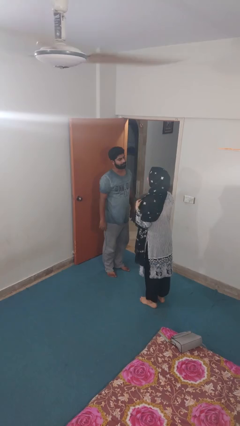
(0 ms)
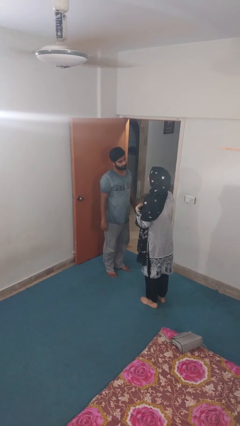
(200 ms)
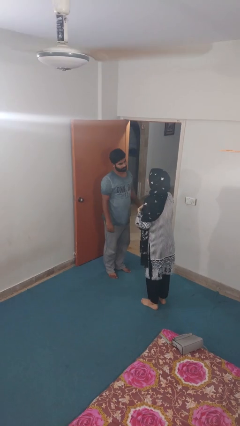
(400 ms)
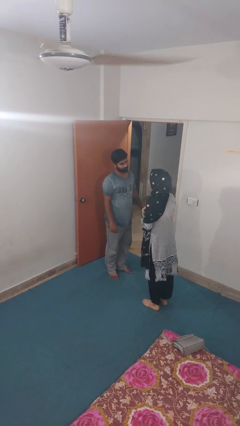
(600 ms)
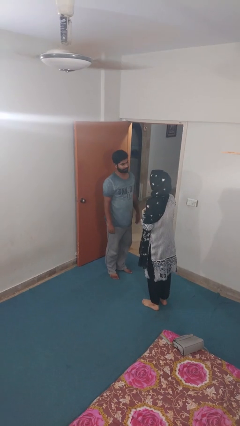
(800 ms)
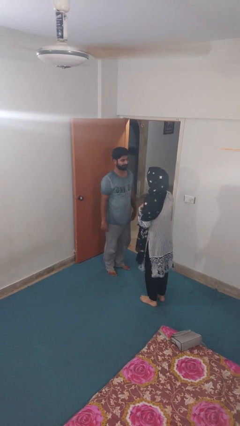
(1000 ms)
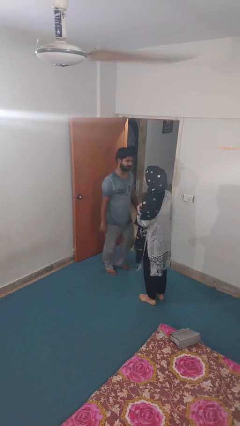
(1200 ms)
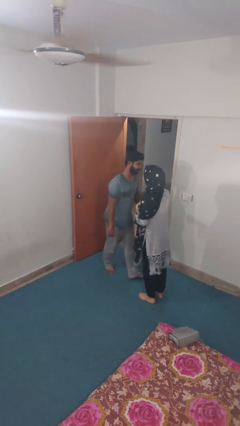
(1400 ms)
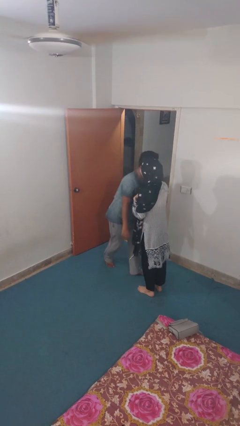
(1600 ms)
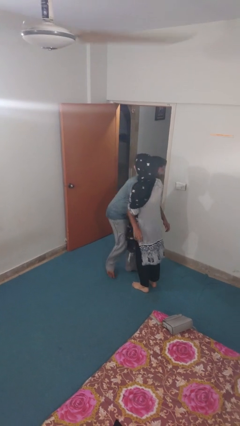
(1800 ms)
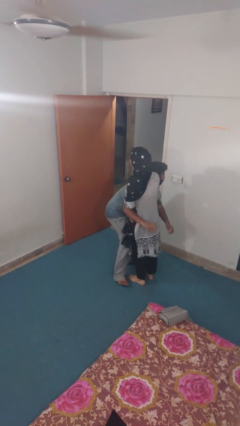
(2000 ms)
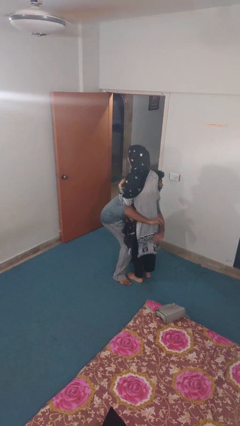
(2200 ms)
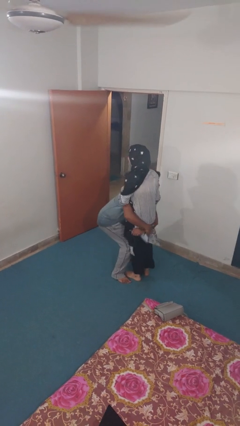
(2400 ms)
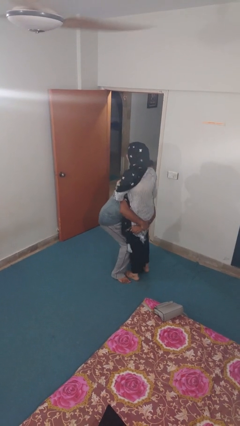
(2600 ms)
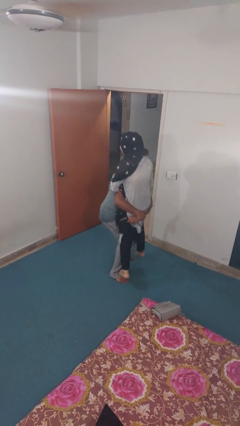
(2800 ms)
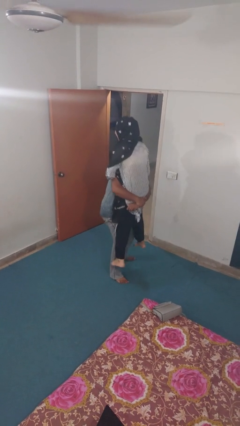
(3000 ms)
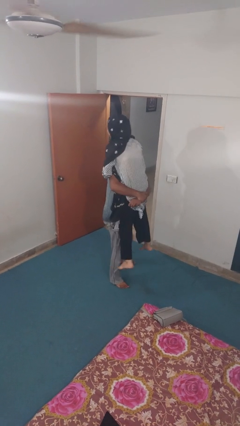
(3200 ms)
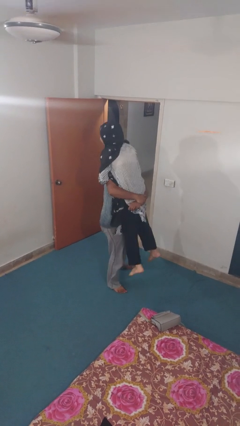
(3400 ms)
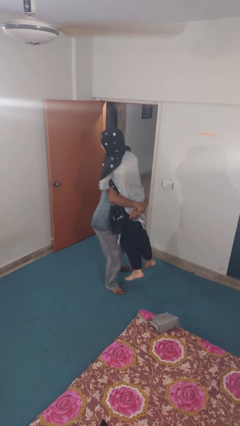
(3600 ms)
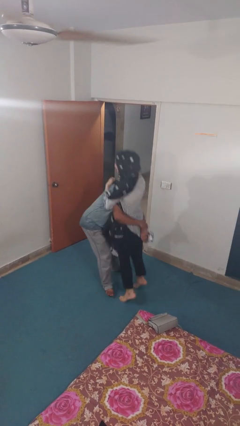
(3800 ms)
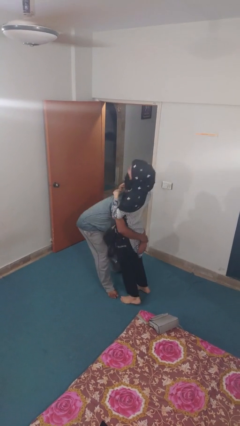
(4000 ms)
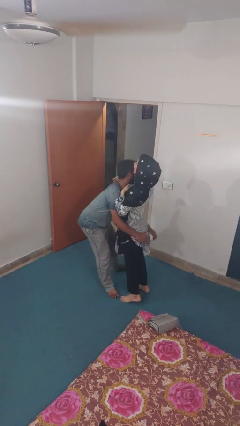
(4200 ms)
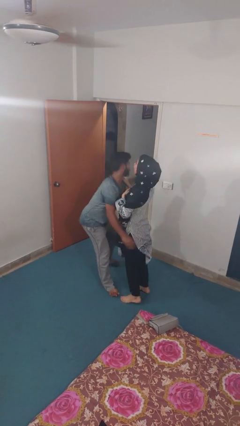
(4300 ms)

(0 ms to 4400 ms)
person picks up person

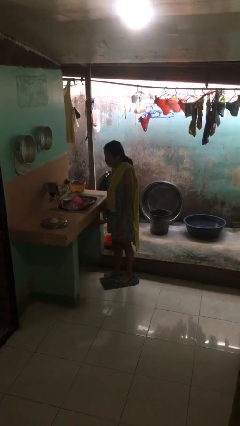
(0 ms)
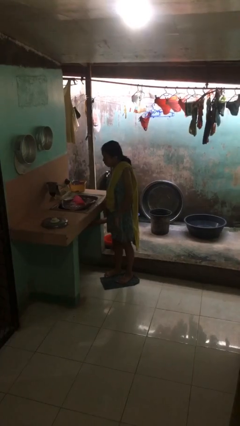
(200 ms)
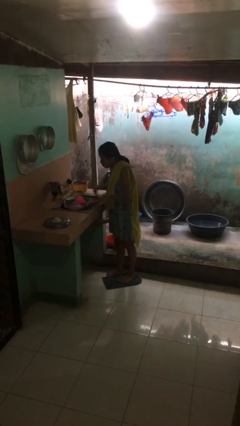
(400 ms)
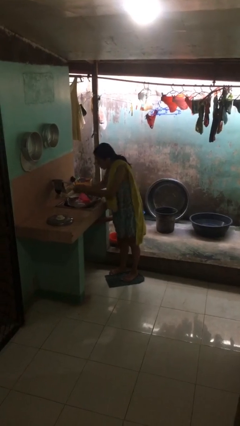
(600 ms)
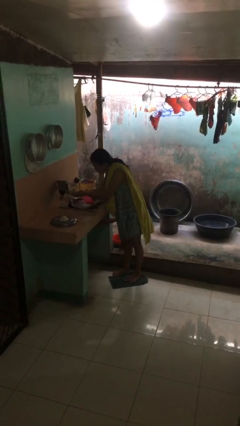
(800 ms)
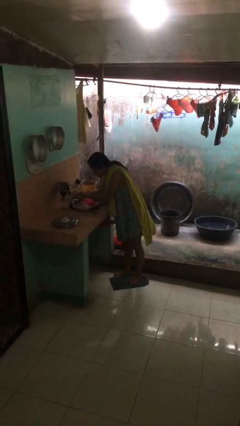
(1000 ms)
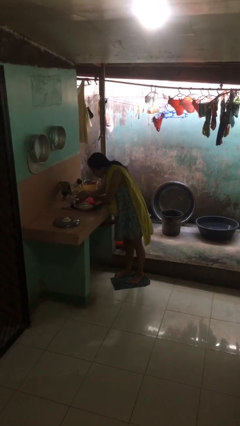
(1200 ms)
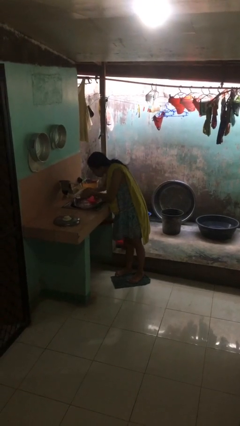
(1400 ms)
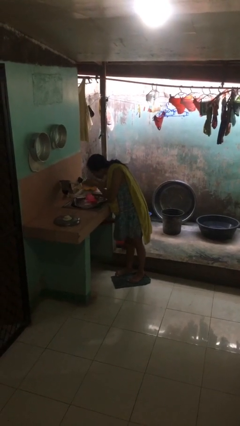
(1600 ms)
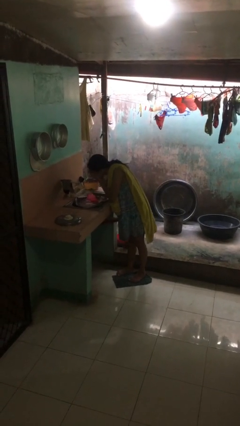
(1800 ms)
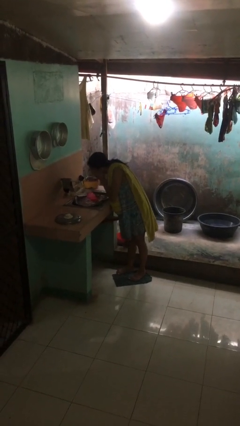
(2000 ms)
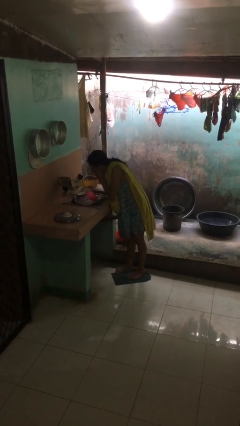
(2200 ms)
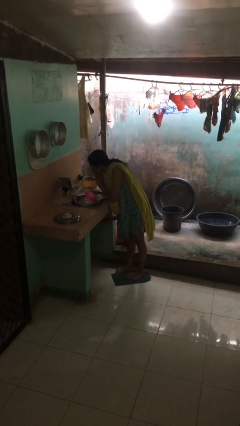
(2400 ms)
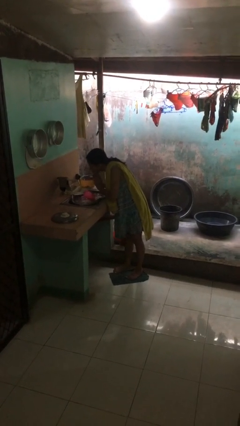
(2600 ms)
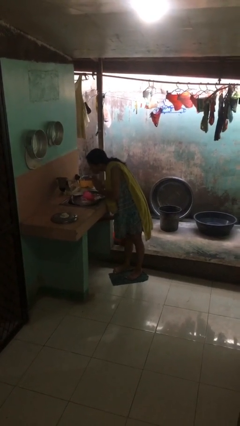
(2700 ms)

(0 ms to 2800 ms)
person washes face

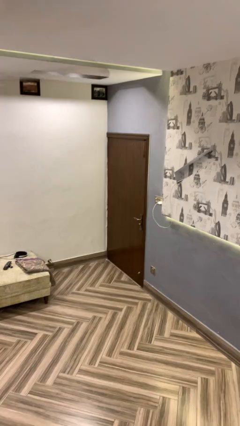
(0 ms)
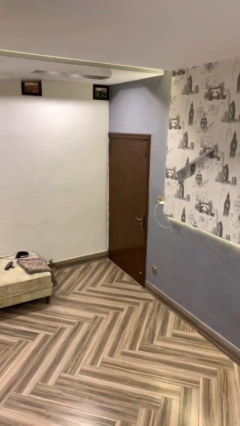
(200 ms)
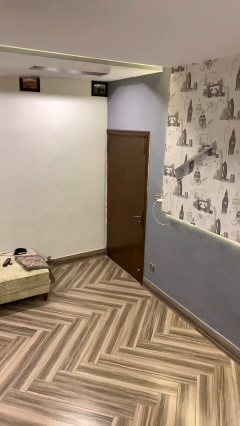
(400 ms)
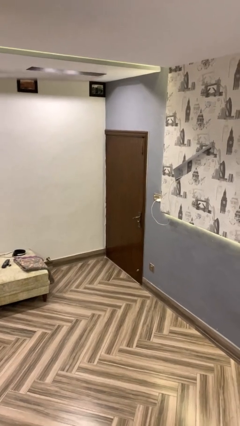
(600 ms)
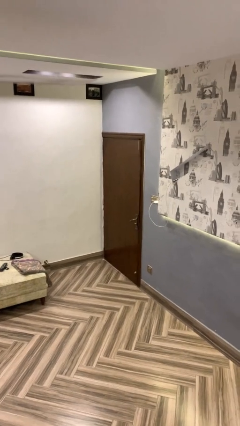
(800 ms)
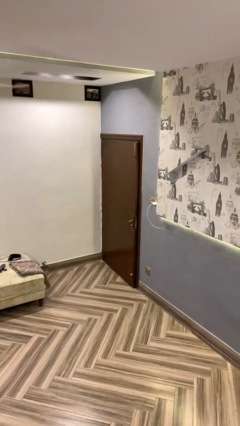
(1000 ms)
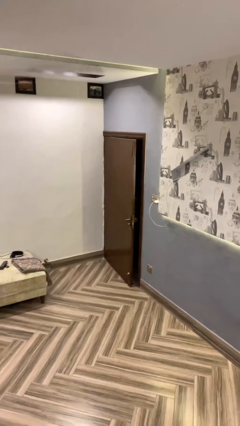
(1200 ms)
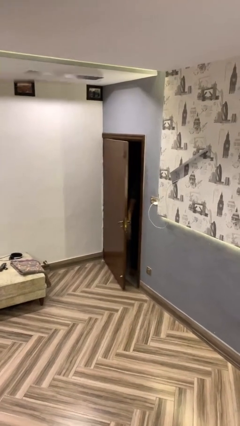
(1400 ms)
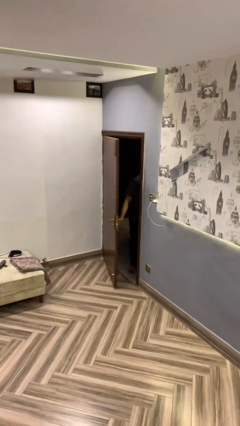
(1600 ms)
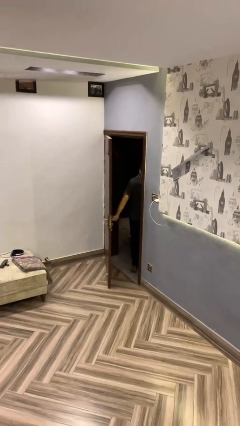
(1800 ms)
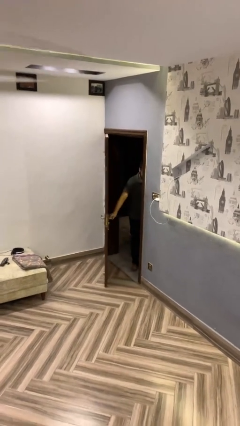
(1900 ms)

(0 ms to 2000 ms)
person opens facility door

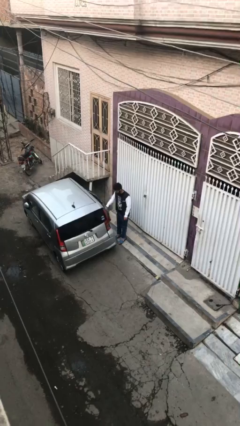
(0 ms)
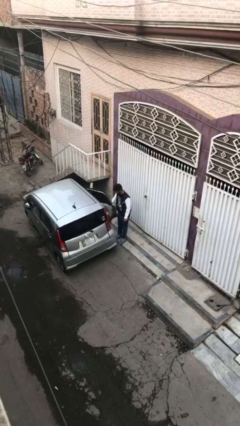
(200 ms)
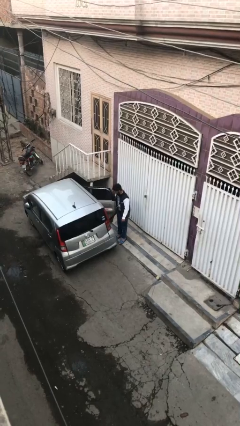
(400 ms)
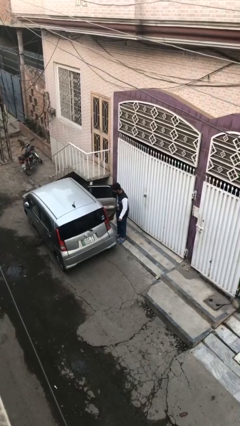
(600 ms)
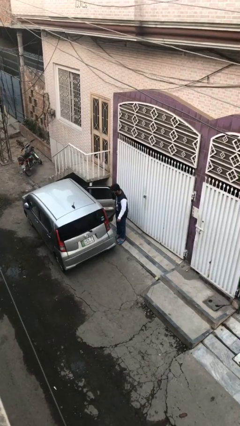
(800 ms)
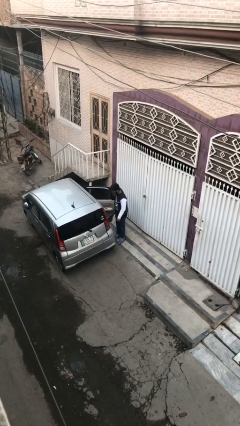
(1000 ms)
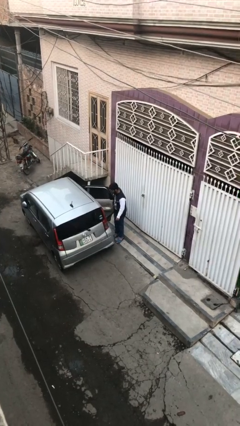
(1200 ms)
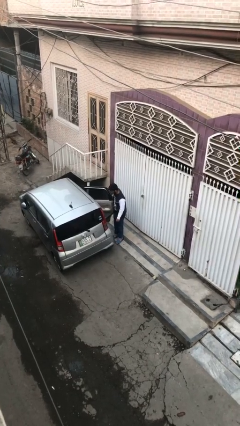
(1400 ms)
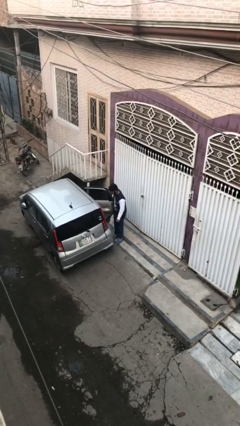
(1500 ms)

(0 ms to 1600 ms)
person opens car door

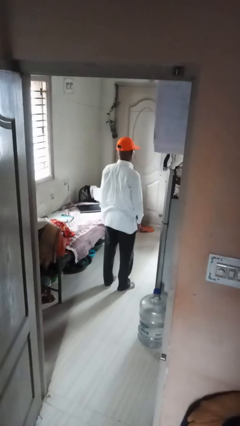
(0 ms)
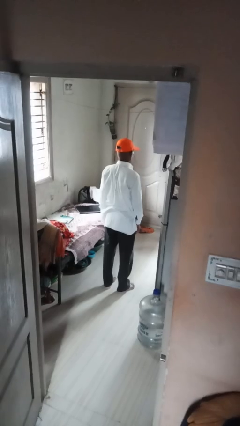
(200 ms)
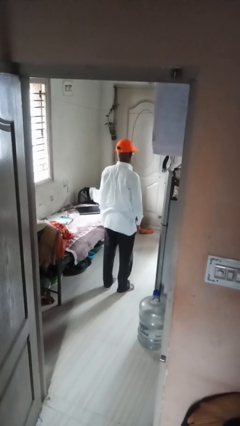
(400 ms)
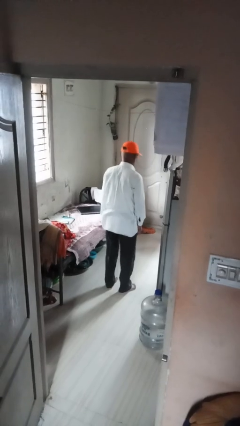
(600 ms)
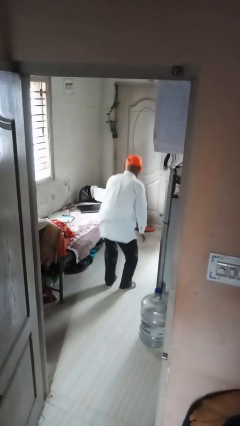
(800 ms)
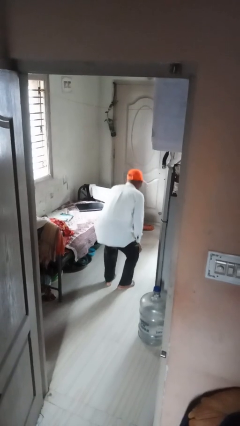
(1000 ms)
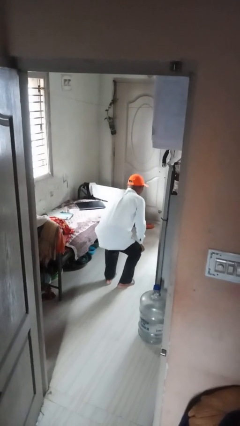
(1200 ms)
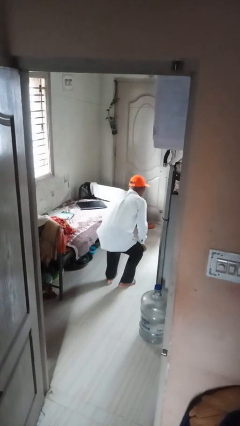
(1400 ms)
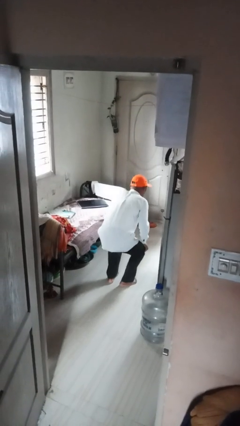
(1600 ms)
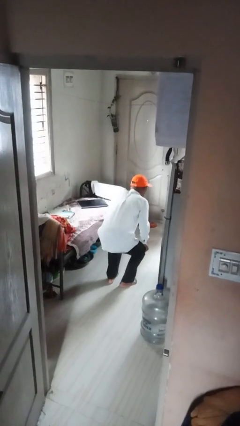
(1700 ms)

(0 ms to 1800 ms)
person squats

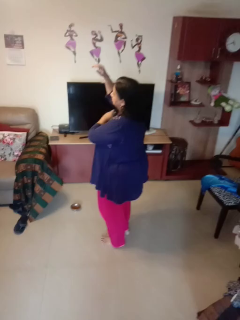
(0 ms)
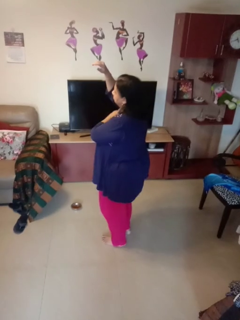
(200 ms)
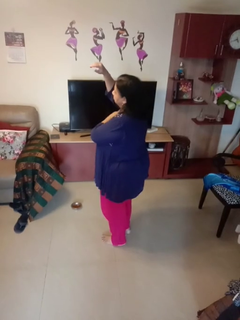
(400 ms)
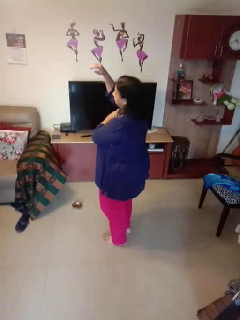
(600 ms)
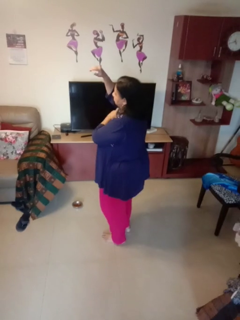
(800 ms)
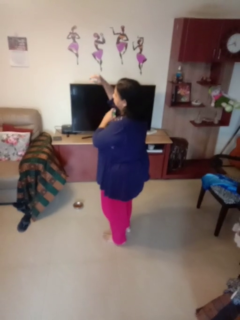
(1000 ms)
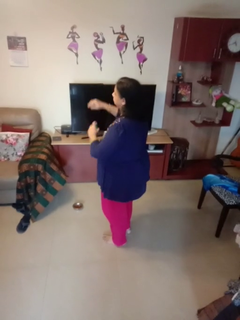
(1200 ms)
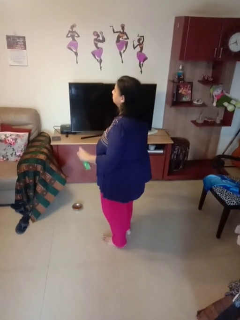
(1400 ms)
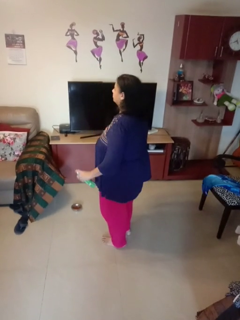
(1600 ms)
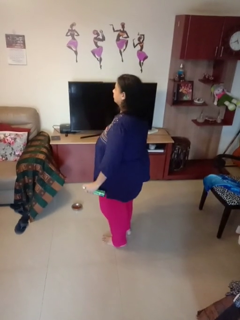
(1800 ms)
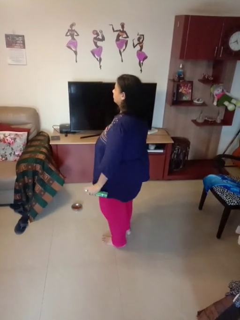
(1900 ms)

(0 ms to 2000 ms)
person applies deodorant

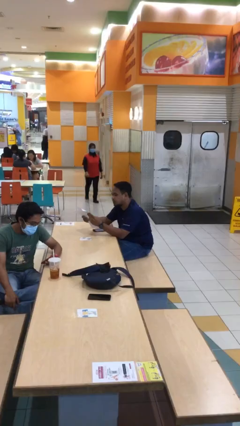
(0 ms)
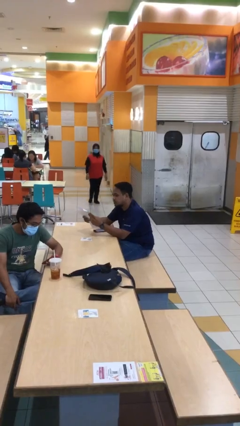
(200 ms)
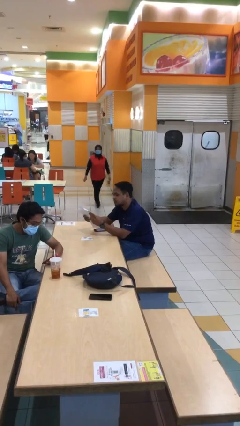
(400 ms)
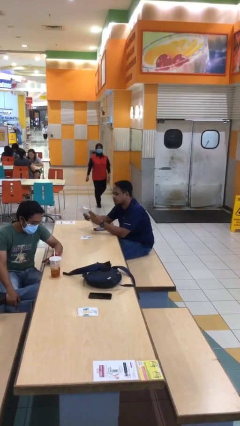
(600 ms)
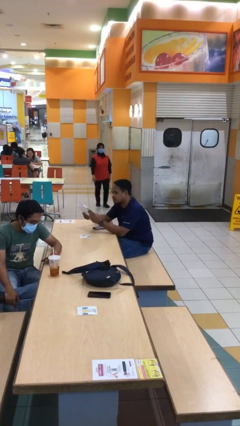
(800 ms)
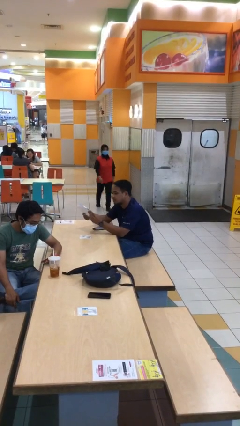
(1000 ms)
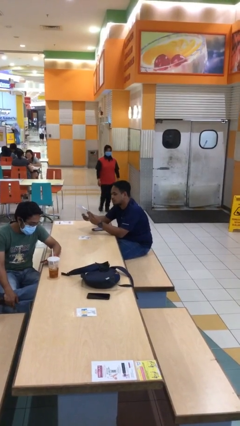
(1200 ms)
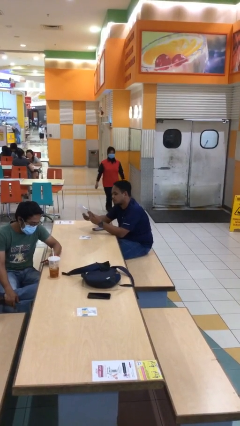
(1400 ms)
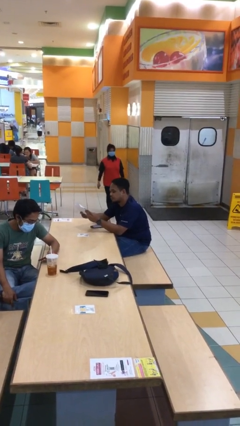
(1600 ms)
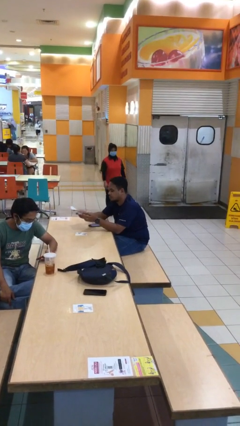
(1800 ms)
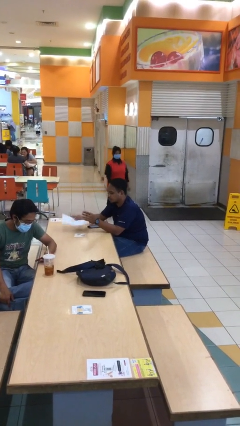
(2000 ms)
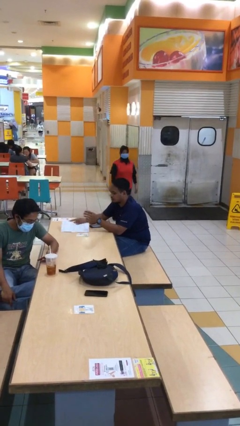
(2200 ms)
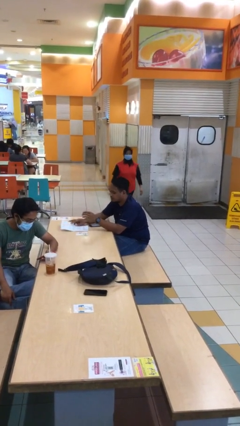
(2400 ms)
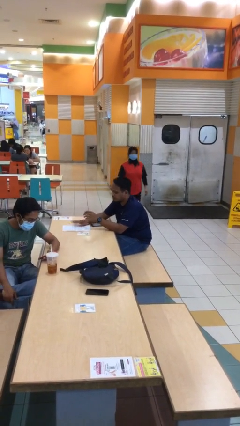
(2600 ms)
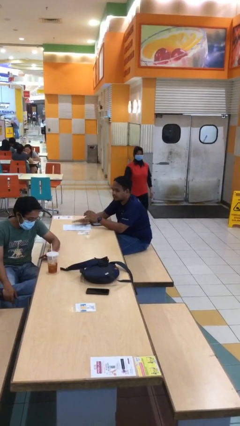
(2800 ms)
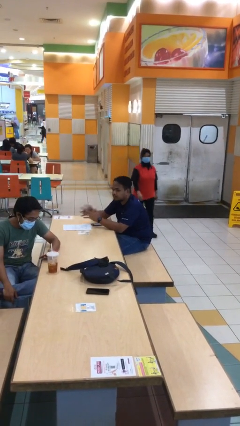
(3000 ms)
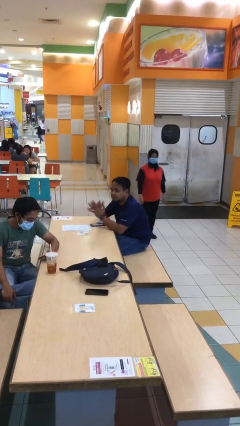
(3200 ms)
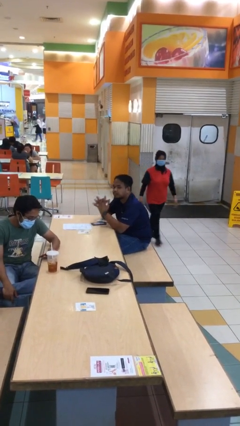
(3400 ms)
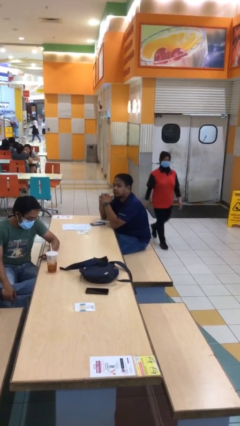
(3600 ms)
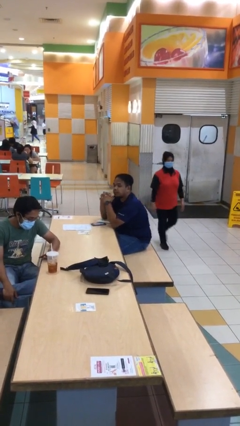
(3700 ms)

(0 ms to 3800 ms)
person puts down object on table
